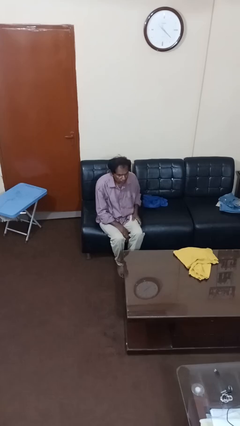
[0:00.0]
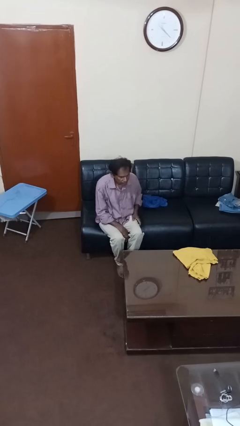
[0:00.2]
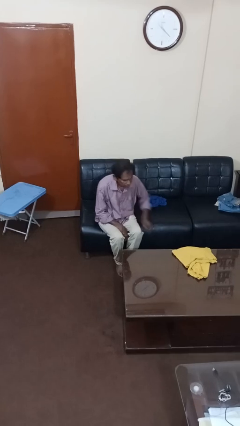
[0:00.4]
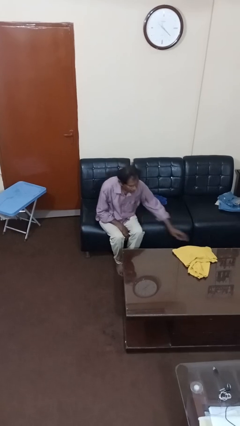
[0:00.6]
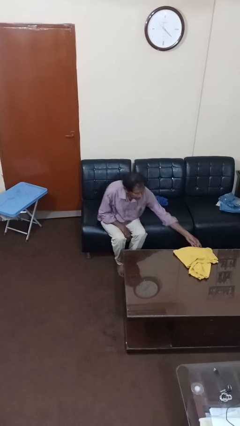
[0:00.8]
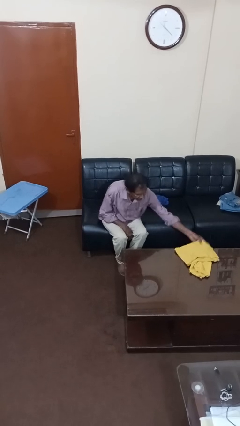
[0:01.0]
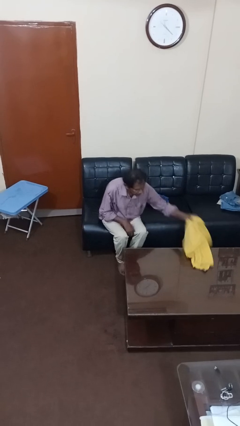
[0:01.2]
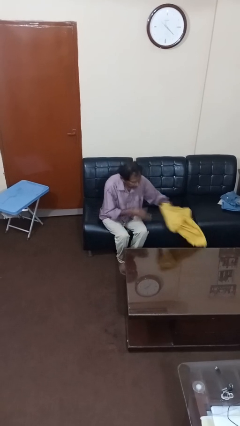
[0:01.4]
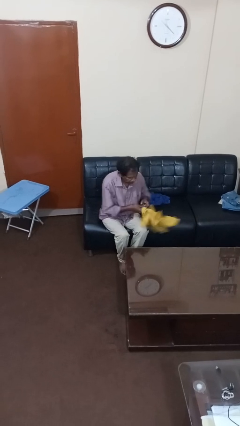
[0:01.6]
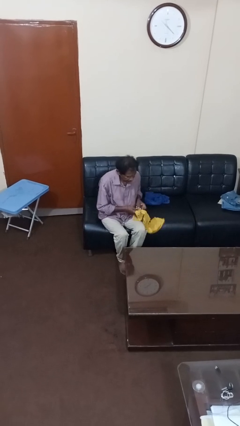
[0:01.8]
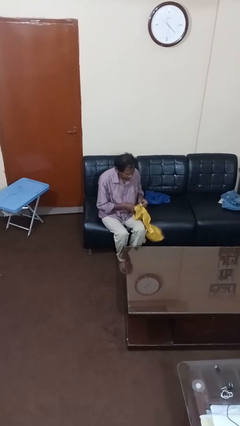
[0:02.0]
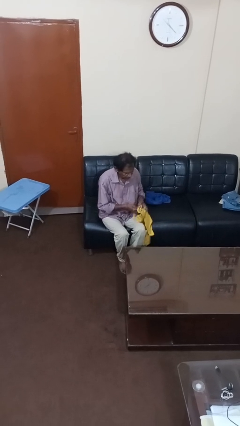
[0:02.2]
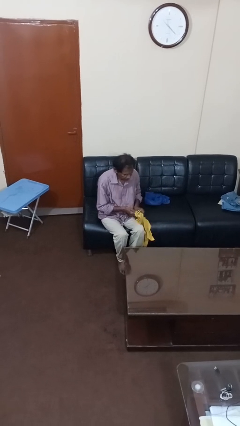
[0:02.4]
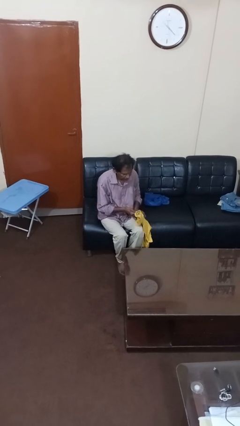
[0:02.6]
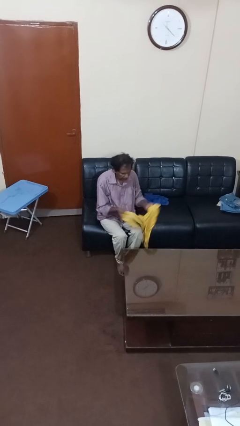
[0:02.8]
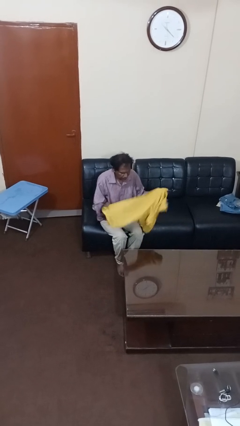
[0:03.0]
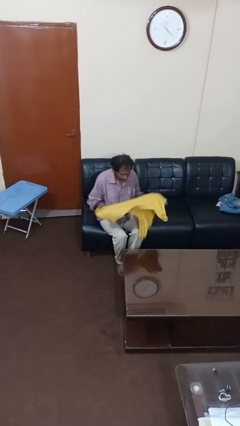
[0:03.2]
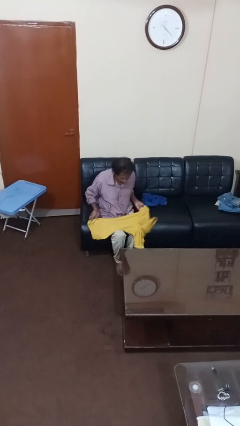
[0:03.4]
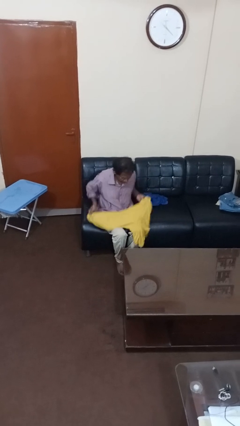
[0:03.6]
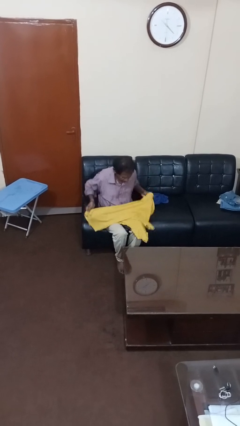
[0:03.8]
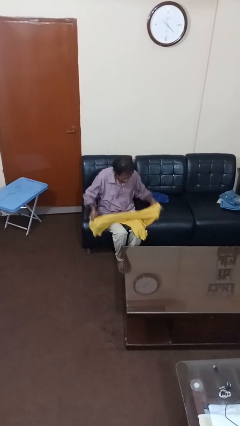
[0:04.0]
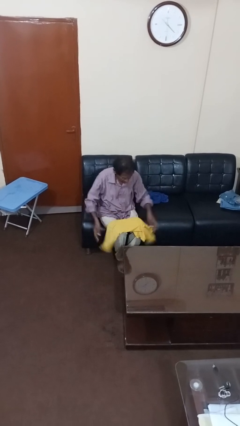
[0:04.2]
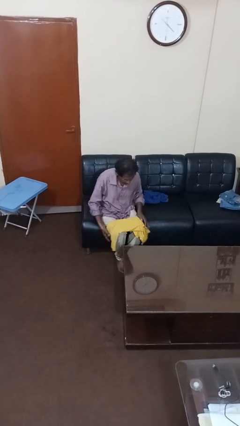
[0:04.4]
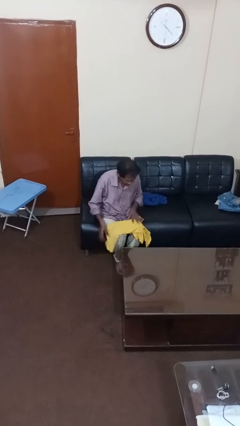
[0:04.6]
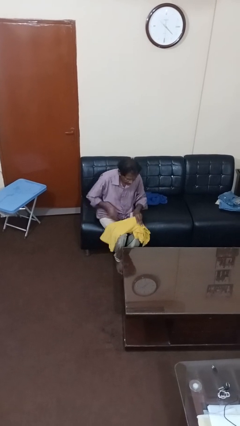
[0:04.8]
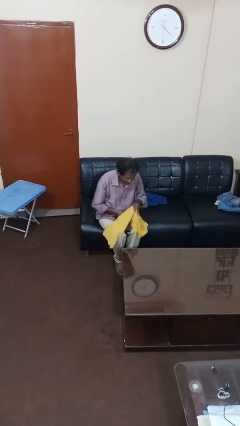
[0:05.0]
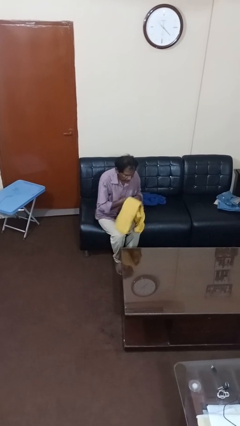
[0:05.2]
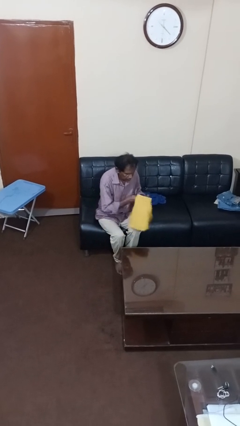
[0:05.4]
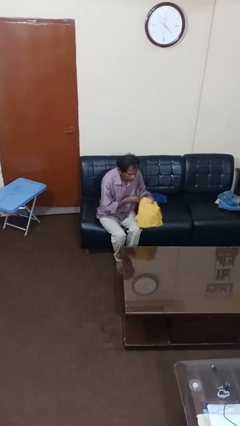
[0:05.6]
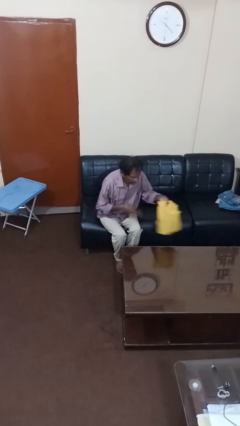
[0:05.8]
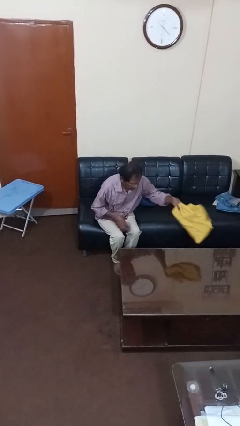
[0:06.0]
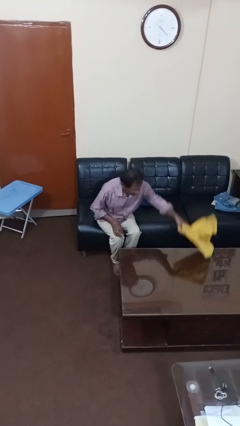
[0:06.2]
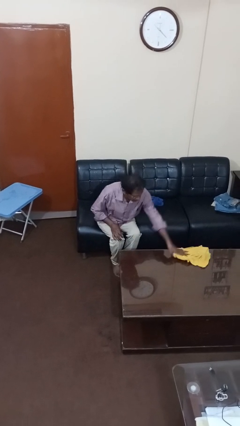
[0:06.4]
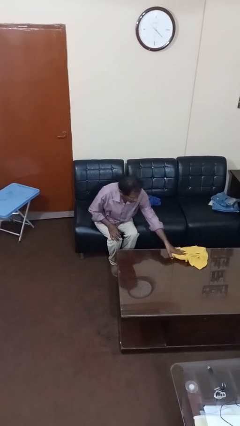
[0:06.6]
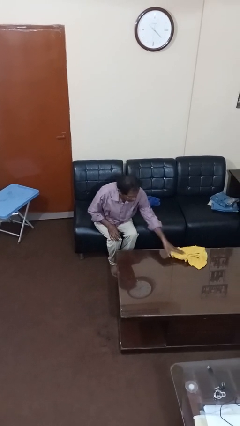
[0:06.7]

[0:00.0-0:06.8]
person folds shirt

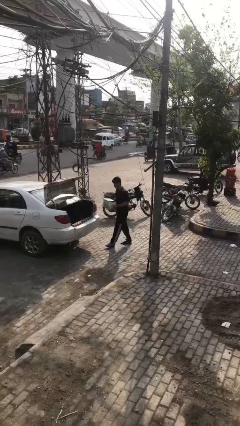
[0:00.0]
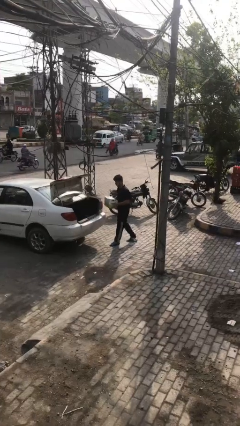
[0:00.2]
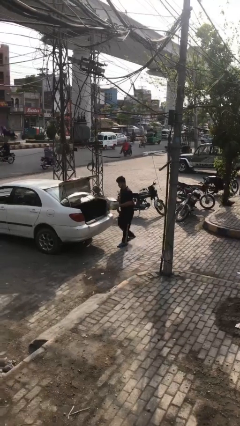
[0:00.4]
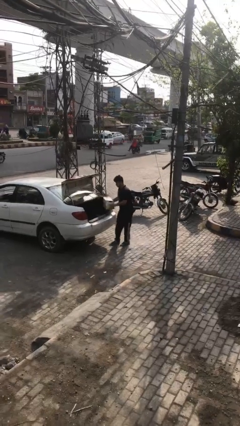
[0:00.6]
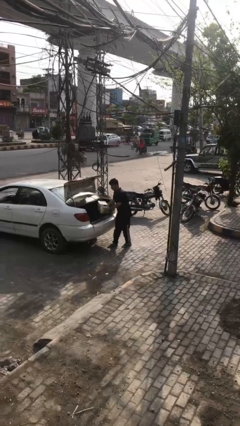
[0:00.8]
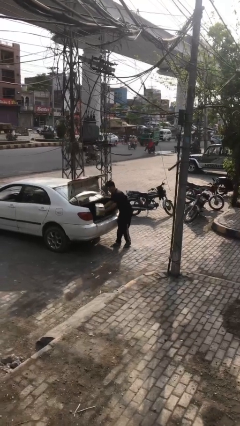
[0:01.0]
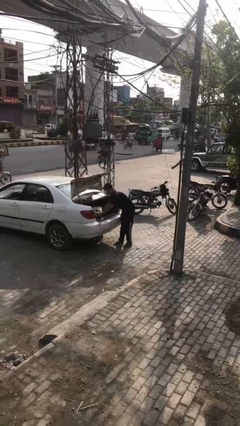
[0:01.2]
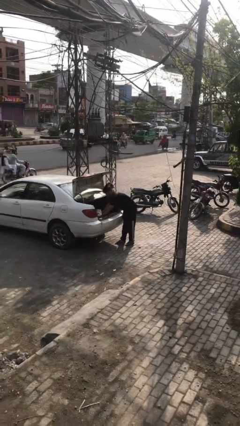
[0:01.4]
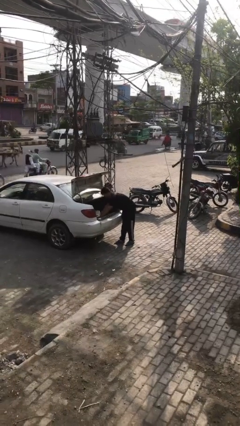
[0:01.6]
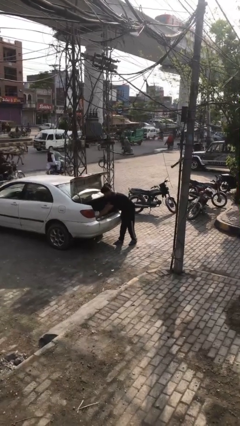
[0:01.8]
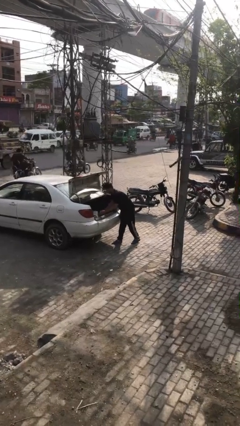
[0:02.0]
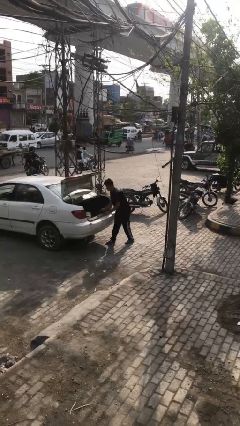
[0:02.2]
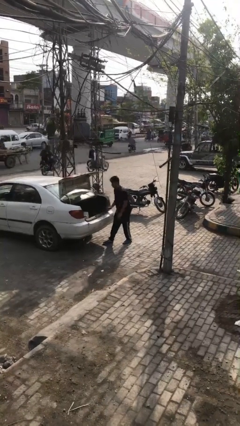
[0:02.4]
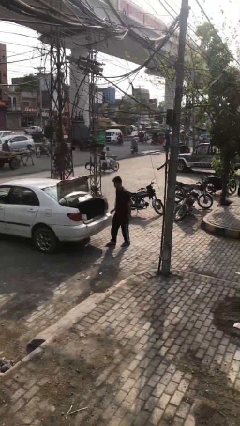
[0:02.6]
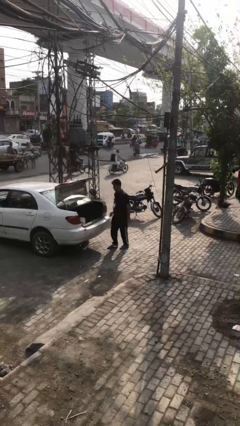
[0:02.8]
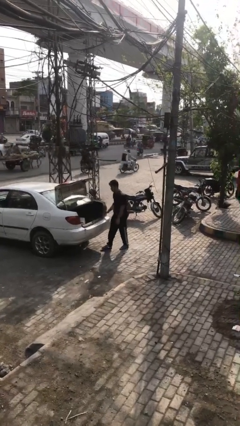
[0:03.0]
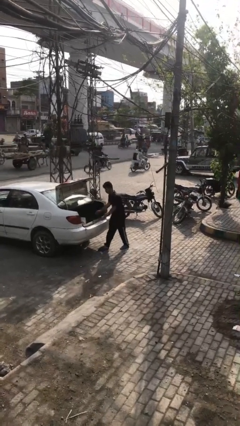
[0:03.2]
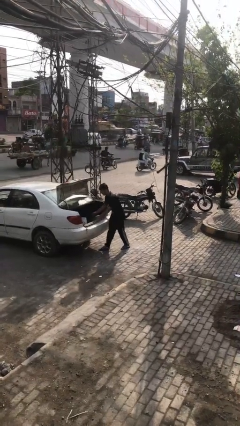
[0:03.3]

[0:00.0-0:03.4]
person loads car

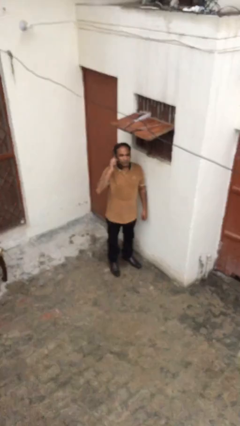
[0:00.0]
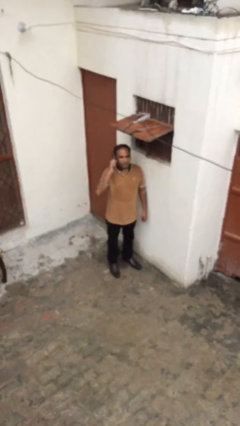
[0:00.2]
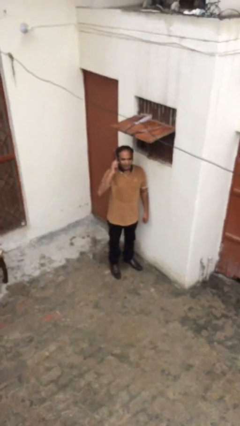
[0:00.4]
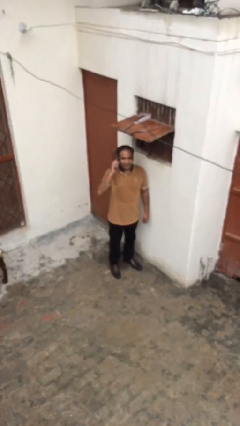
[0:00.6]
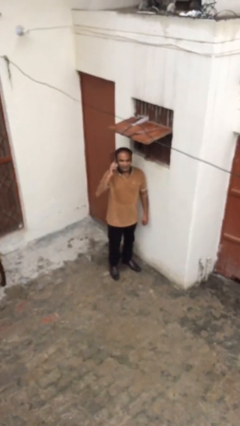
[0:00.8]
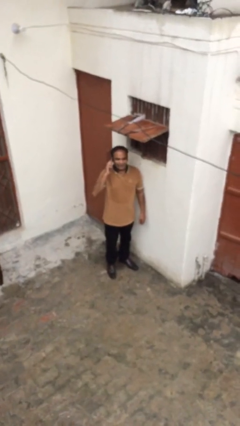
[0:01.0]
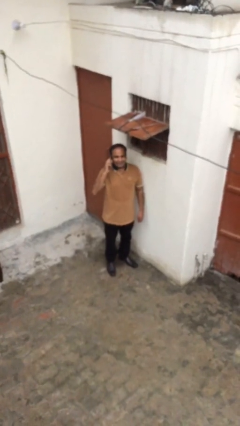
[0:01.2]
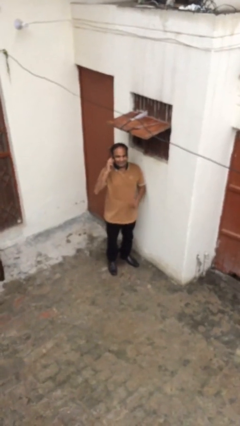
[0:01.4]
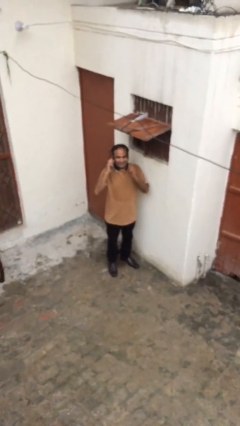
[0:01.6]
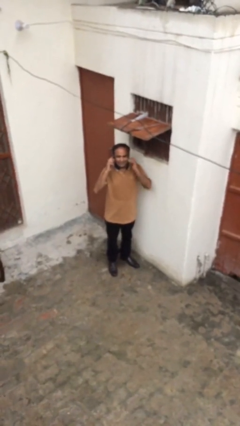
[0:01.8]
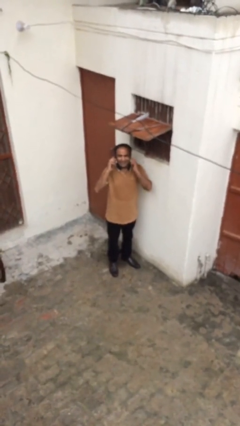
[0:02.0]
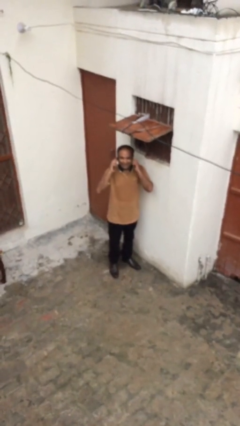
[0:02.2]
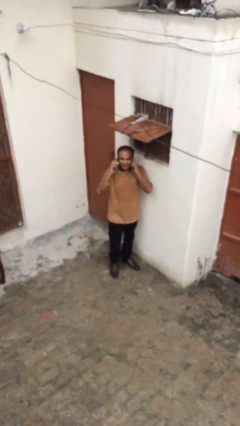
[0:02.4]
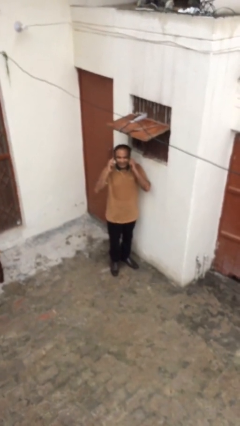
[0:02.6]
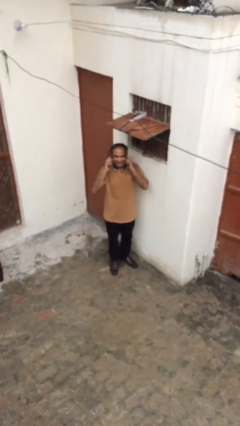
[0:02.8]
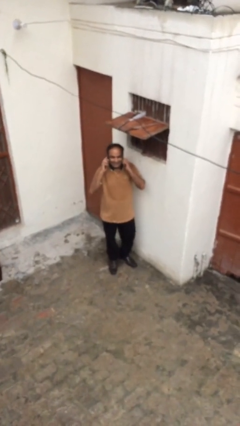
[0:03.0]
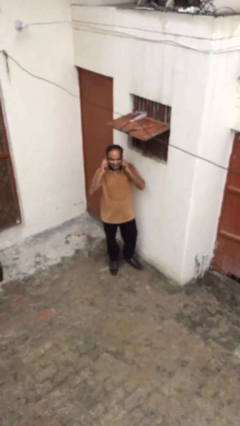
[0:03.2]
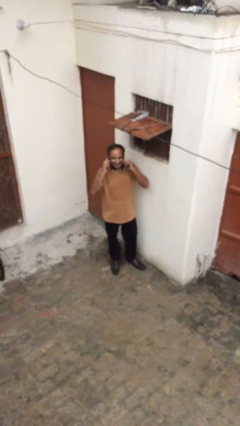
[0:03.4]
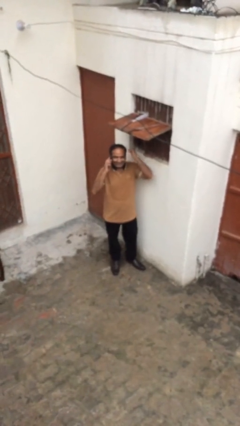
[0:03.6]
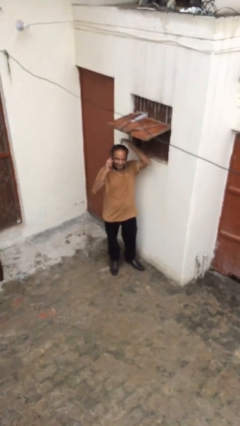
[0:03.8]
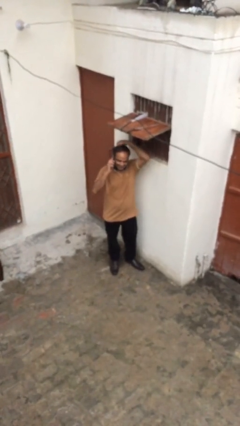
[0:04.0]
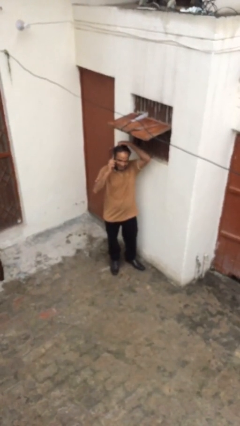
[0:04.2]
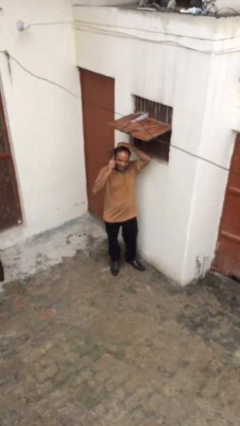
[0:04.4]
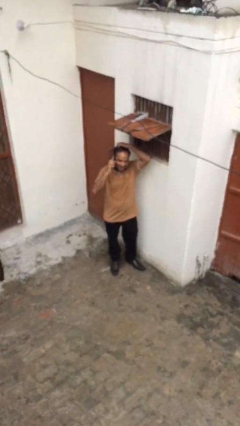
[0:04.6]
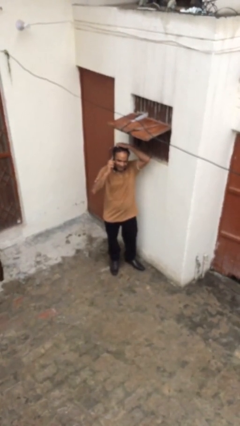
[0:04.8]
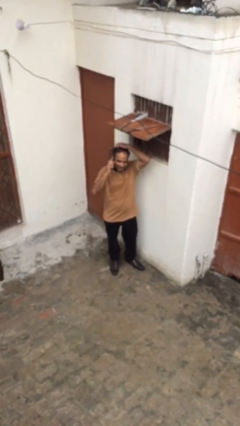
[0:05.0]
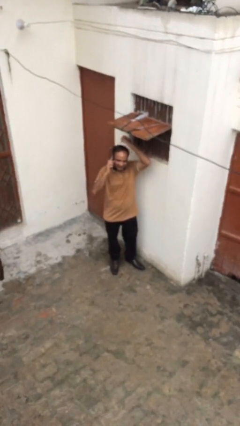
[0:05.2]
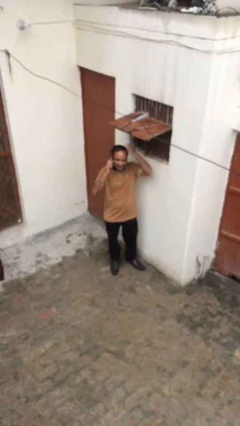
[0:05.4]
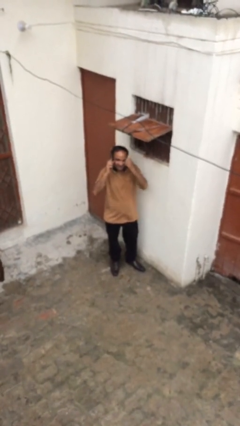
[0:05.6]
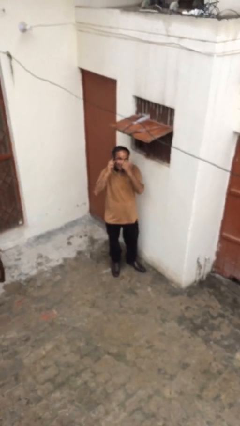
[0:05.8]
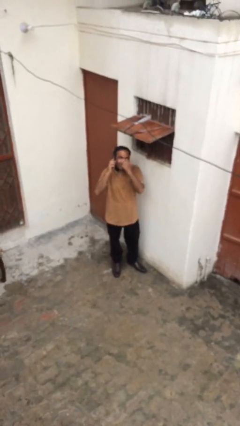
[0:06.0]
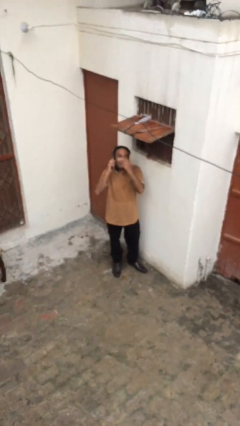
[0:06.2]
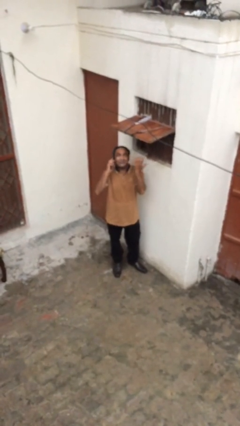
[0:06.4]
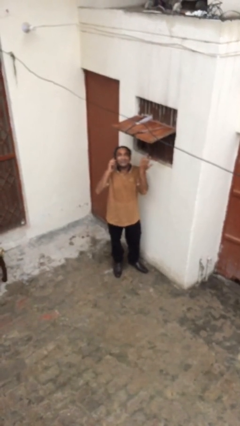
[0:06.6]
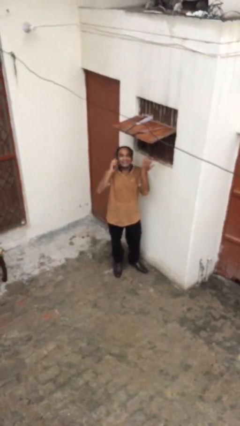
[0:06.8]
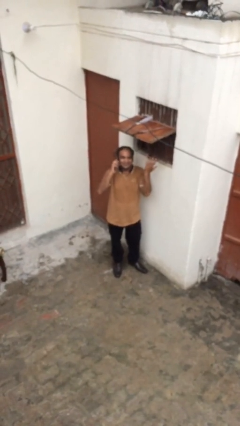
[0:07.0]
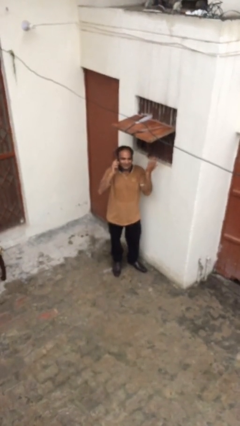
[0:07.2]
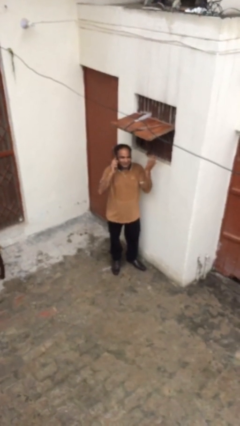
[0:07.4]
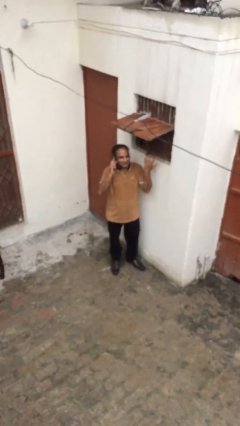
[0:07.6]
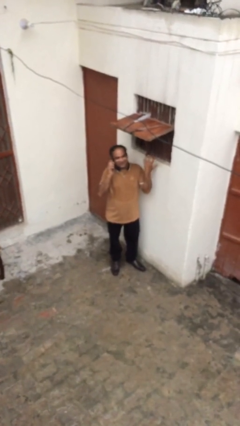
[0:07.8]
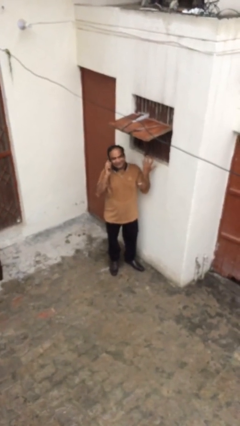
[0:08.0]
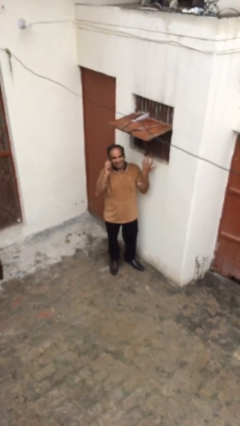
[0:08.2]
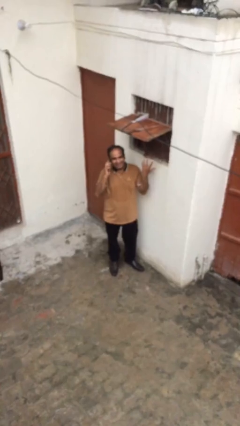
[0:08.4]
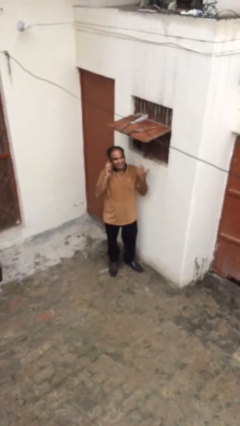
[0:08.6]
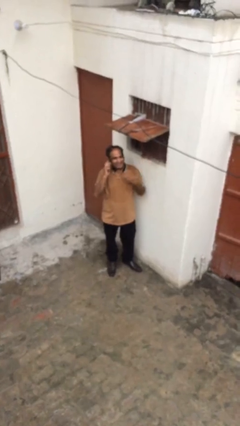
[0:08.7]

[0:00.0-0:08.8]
person talks on phone
